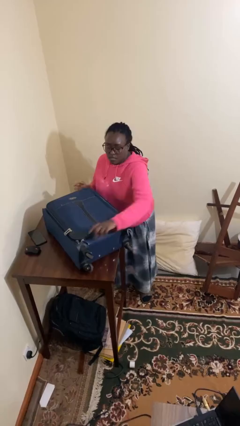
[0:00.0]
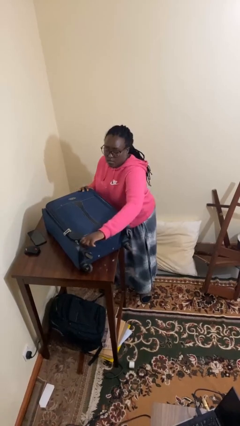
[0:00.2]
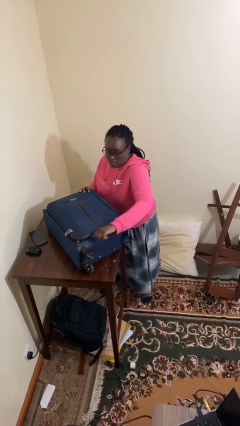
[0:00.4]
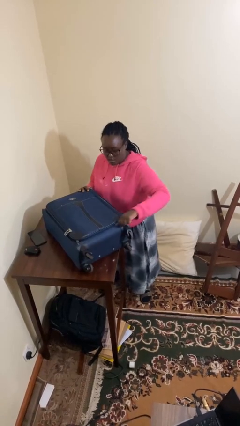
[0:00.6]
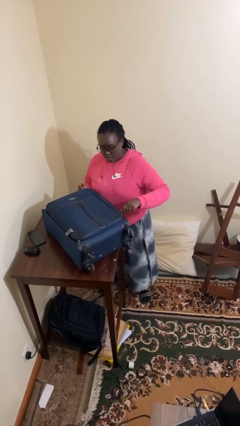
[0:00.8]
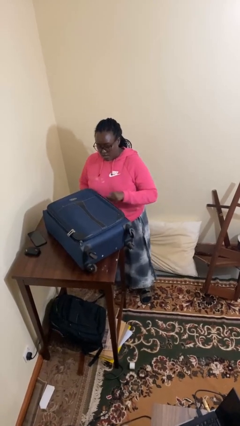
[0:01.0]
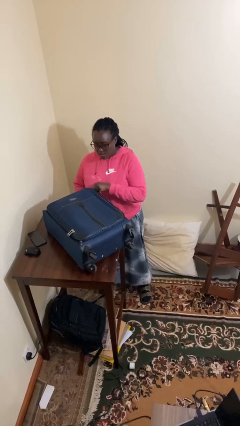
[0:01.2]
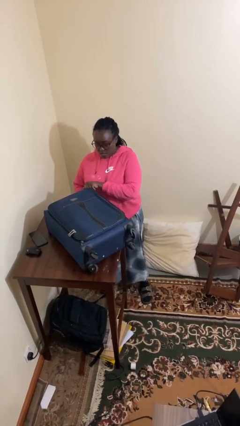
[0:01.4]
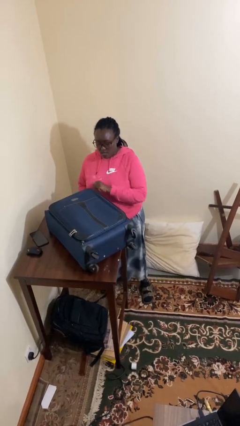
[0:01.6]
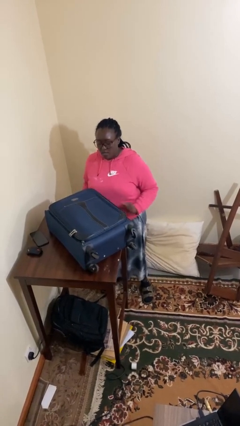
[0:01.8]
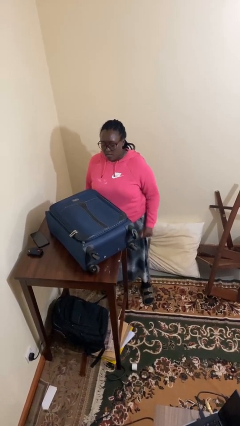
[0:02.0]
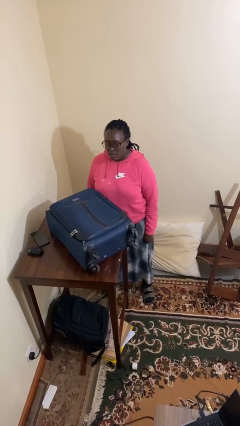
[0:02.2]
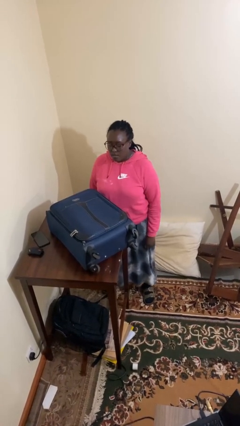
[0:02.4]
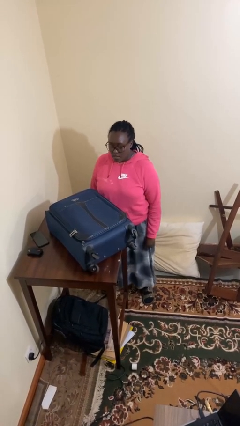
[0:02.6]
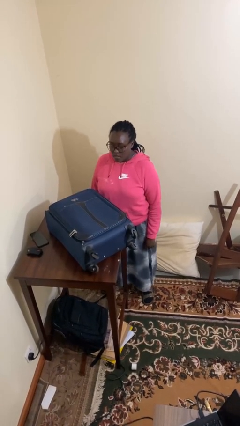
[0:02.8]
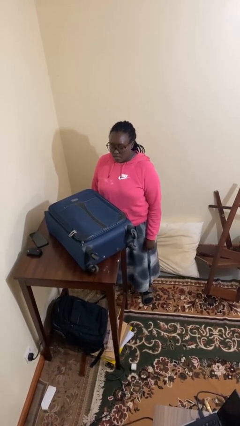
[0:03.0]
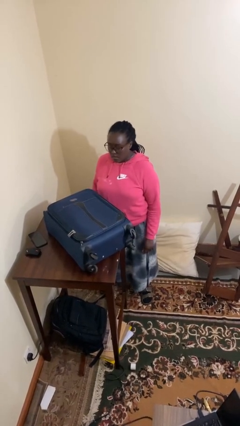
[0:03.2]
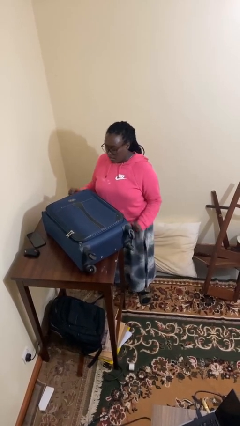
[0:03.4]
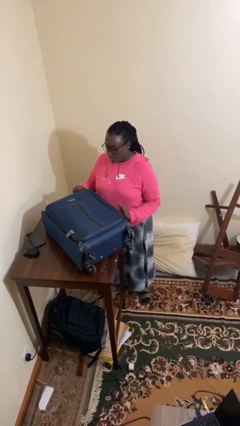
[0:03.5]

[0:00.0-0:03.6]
person opens suitcase

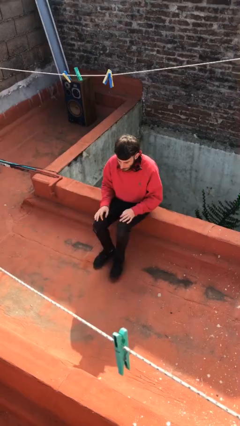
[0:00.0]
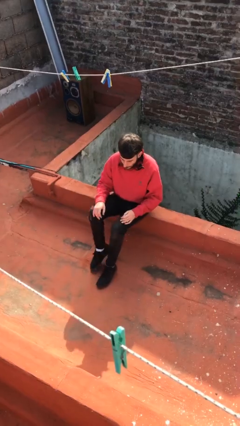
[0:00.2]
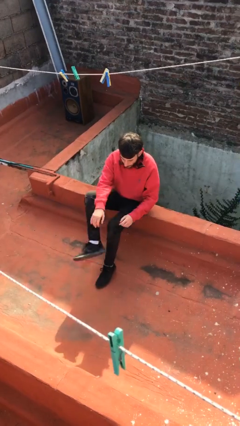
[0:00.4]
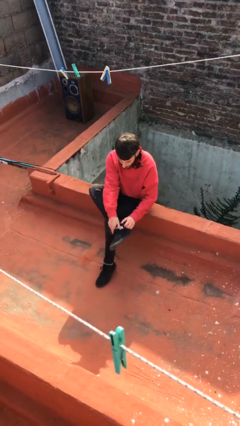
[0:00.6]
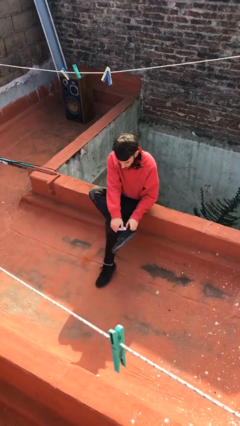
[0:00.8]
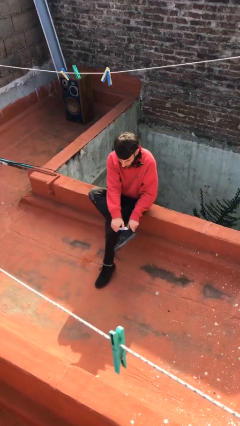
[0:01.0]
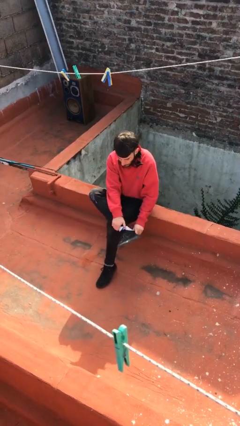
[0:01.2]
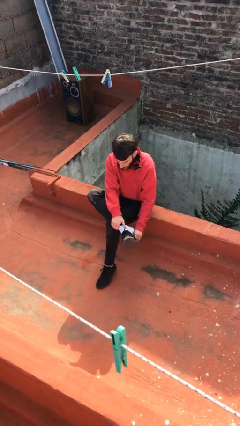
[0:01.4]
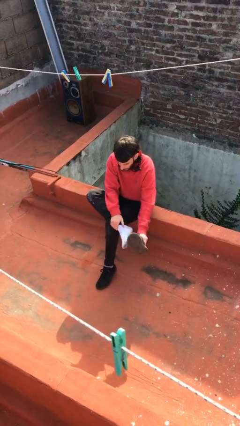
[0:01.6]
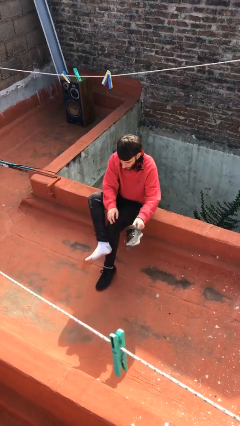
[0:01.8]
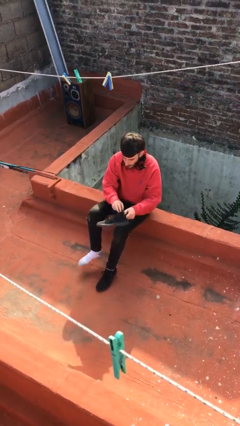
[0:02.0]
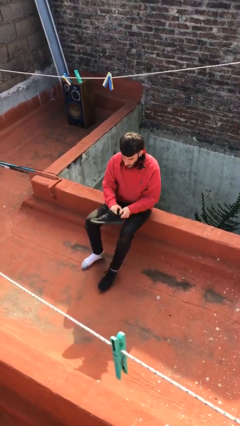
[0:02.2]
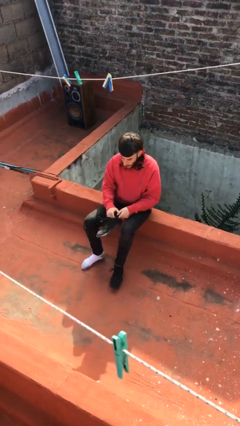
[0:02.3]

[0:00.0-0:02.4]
person takes off shoes

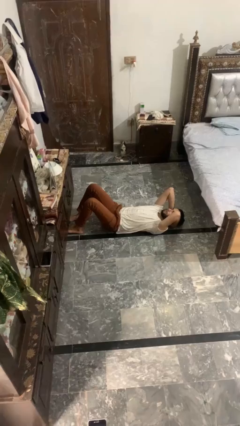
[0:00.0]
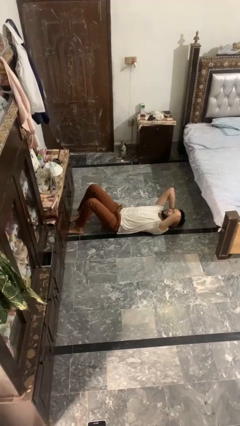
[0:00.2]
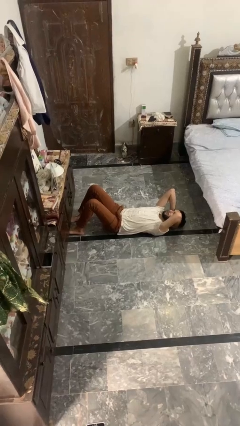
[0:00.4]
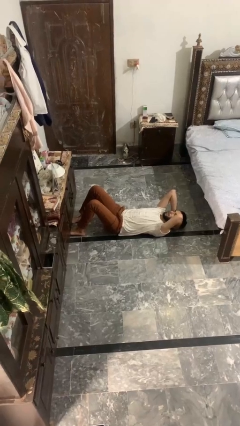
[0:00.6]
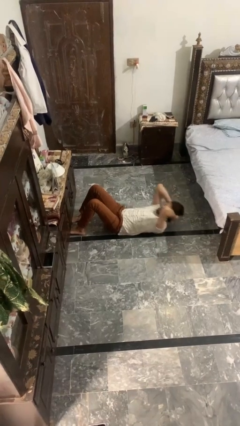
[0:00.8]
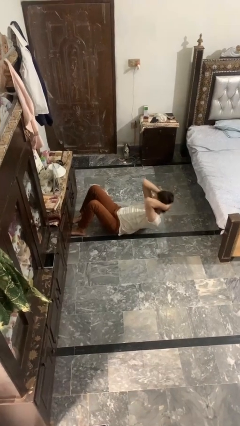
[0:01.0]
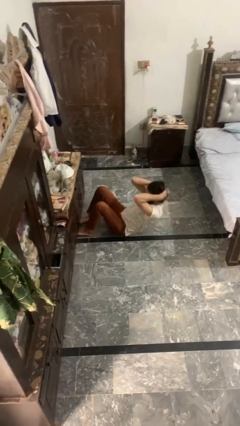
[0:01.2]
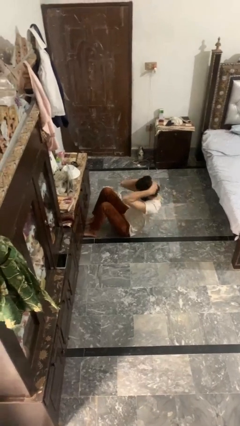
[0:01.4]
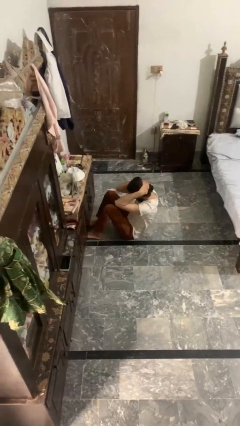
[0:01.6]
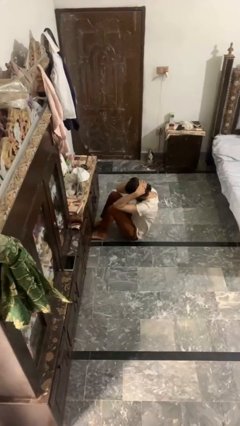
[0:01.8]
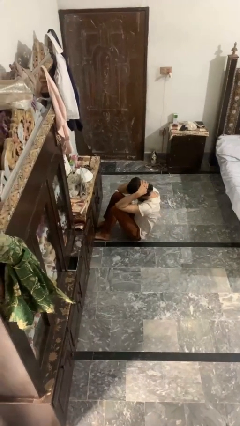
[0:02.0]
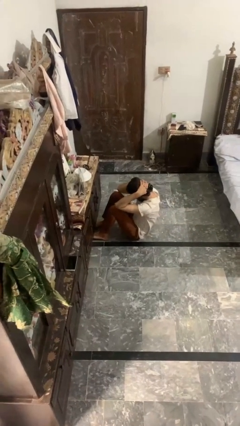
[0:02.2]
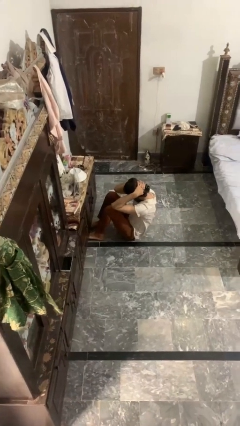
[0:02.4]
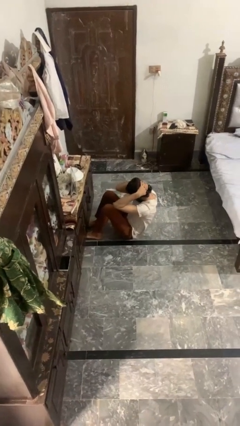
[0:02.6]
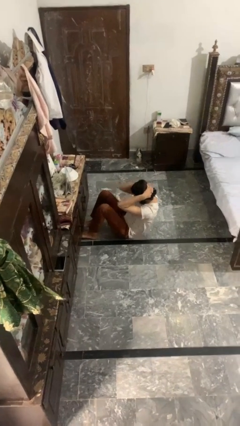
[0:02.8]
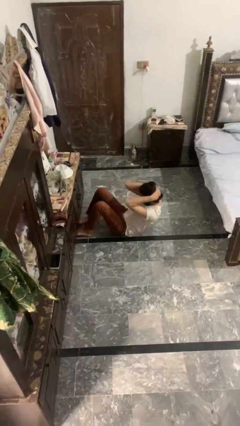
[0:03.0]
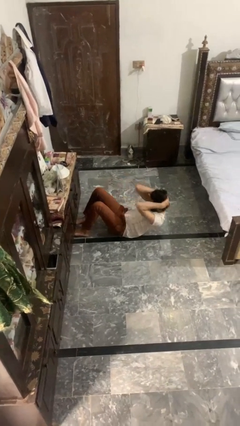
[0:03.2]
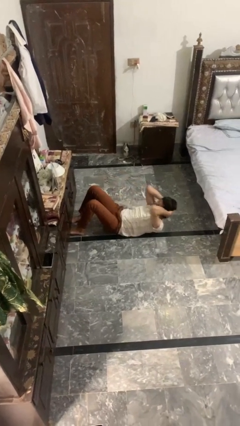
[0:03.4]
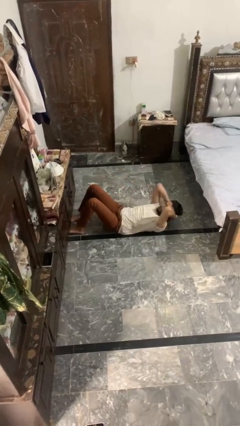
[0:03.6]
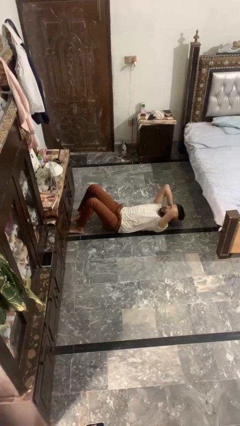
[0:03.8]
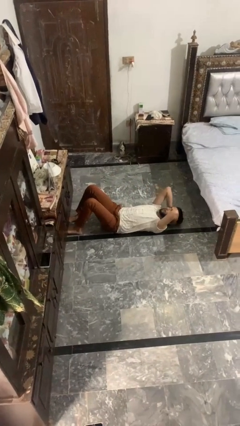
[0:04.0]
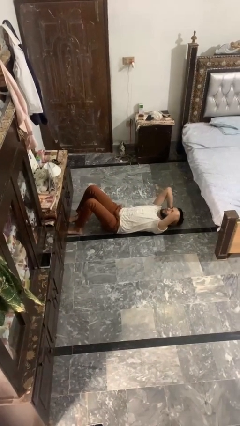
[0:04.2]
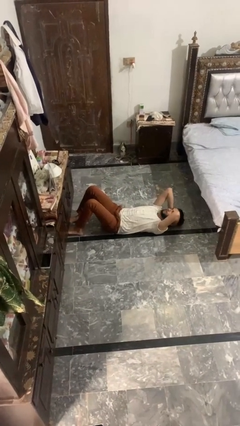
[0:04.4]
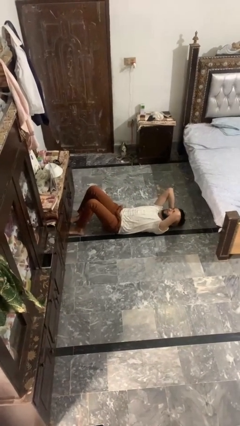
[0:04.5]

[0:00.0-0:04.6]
person exercises with situp

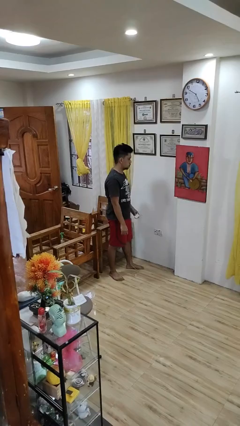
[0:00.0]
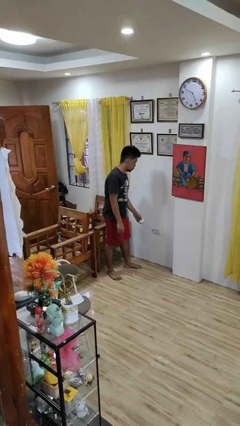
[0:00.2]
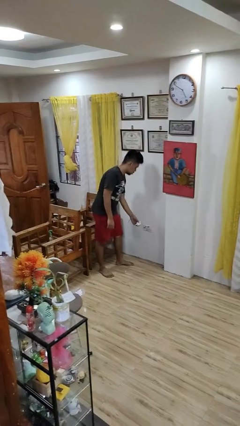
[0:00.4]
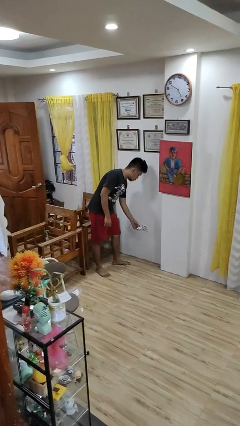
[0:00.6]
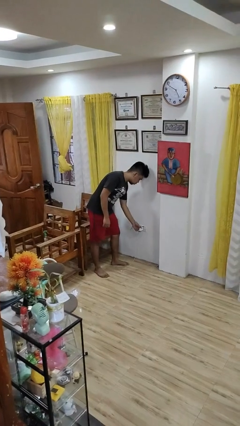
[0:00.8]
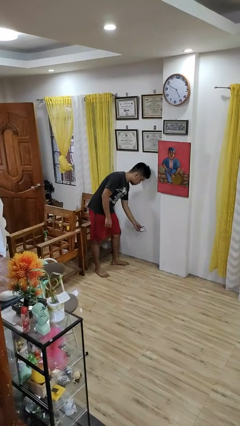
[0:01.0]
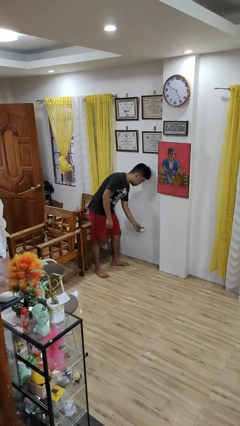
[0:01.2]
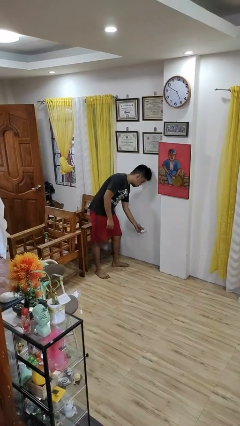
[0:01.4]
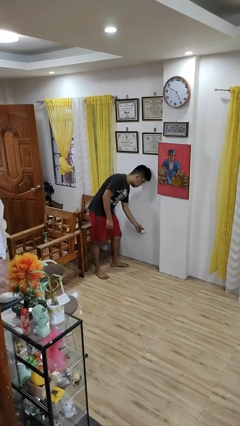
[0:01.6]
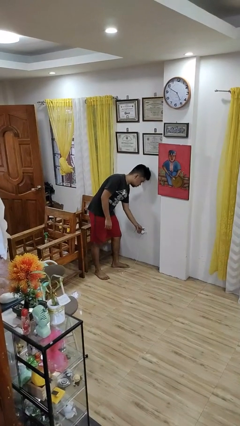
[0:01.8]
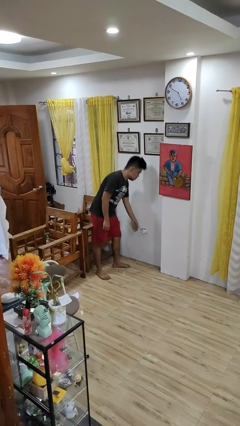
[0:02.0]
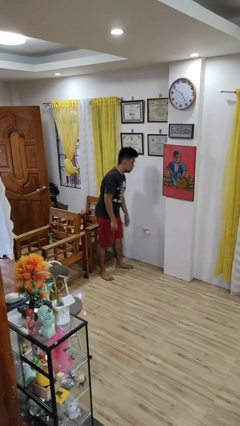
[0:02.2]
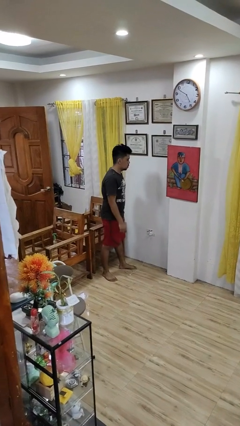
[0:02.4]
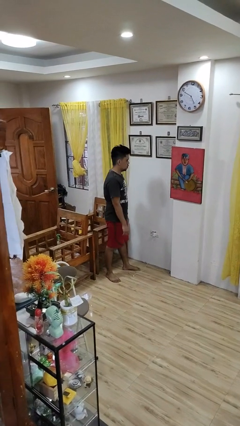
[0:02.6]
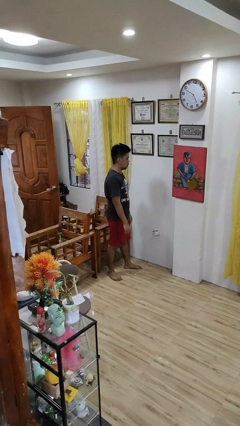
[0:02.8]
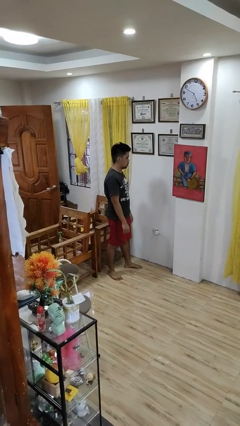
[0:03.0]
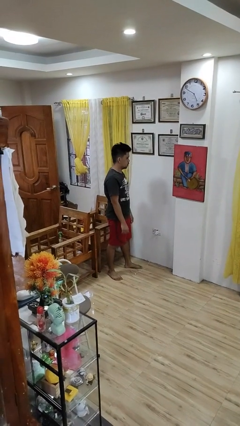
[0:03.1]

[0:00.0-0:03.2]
person plugs into electrical socket

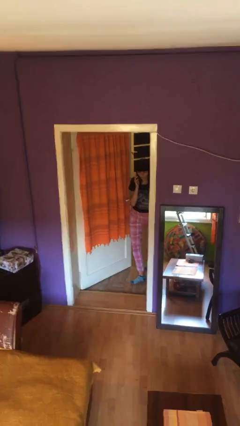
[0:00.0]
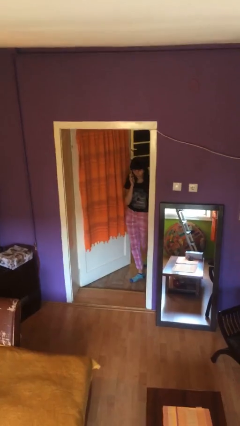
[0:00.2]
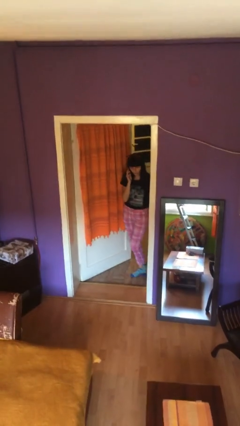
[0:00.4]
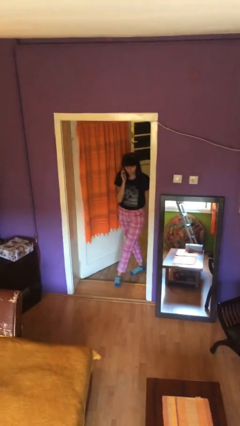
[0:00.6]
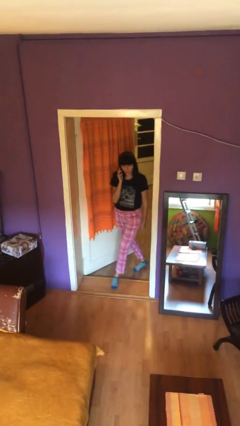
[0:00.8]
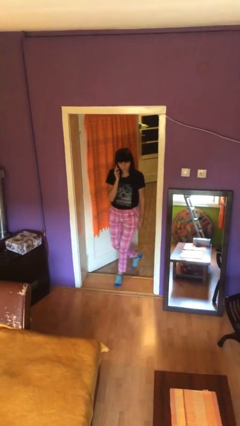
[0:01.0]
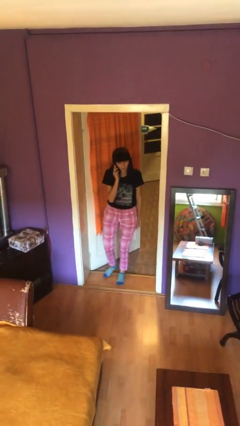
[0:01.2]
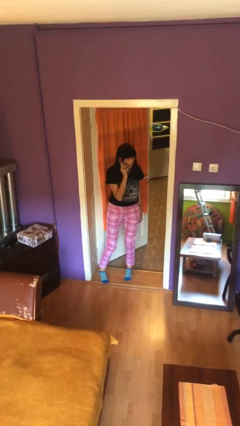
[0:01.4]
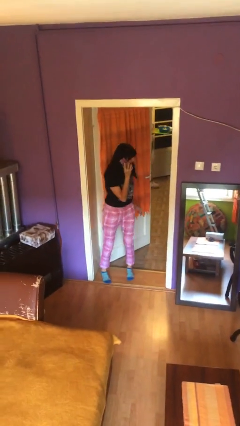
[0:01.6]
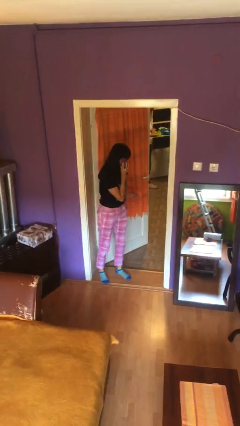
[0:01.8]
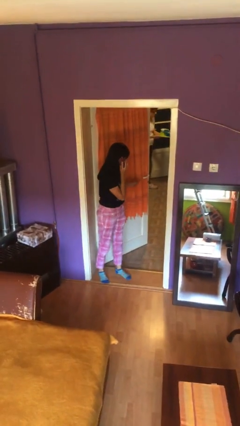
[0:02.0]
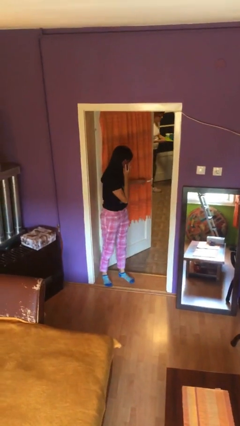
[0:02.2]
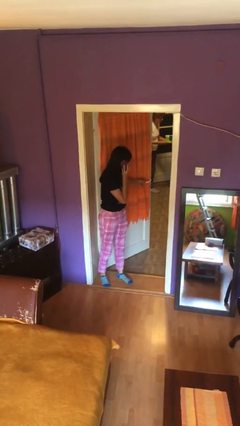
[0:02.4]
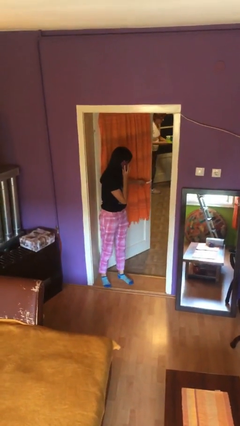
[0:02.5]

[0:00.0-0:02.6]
person enters scene through structure

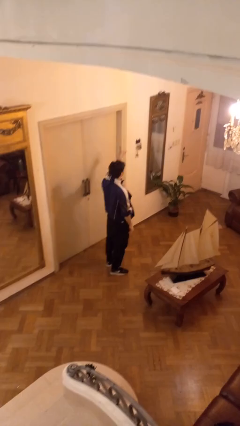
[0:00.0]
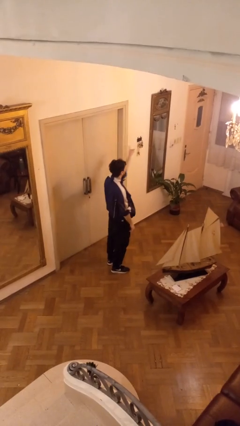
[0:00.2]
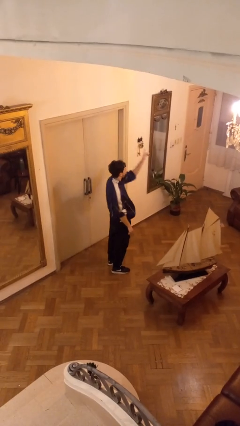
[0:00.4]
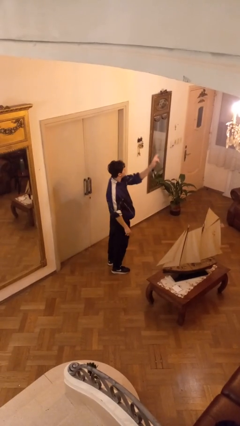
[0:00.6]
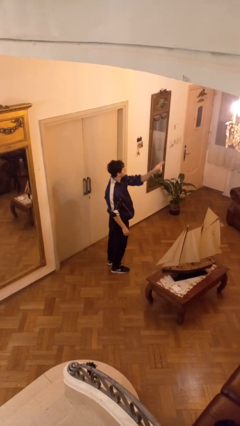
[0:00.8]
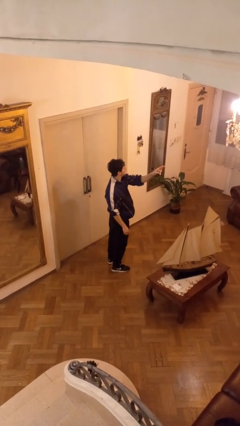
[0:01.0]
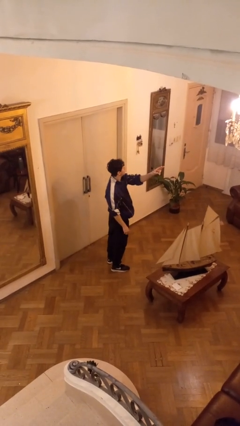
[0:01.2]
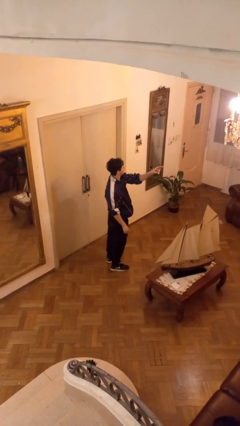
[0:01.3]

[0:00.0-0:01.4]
person gestures swipe right
